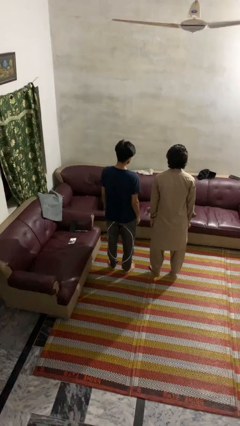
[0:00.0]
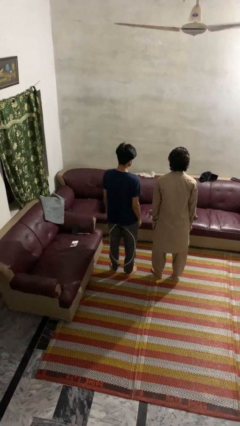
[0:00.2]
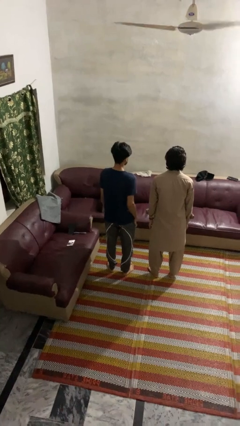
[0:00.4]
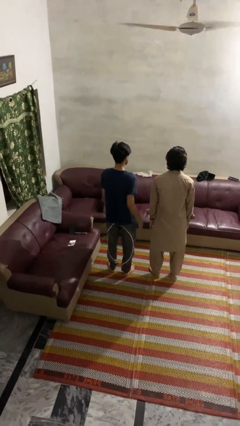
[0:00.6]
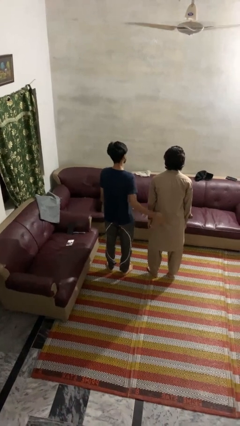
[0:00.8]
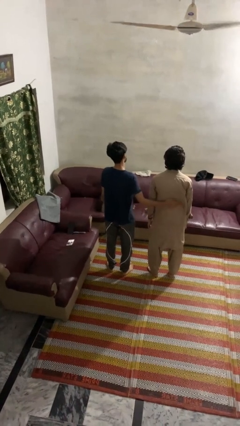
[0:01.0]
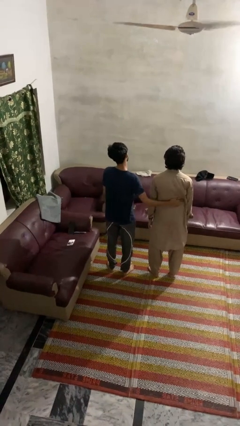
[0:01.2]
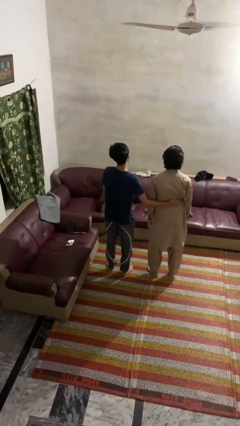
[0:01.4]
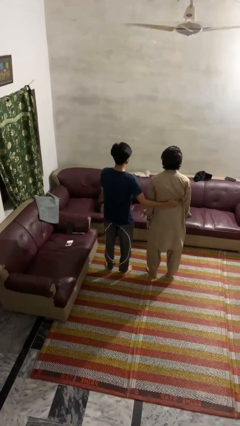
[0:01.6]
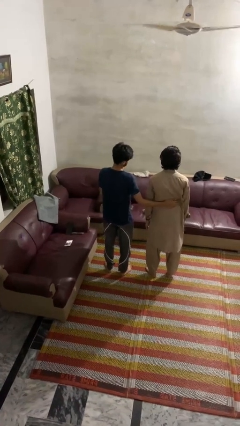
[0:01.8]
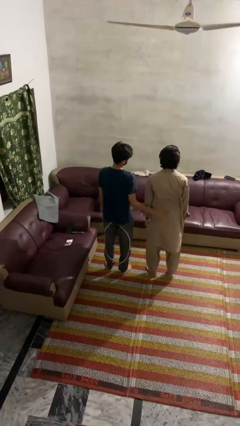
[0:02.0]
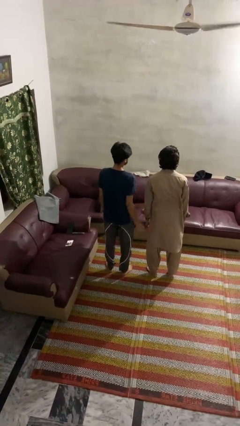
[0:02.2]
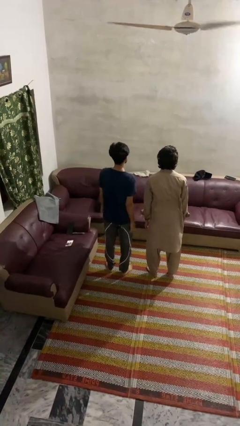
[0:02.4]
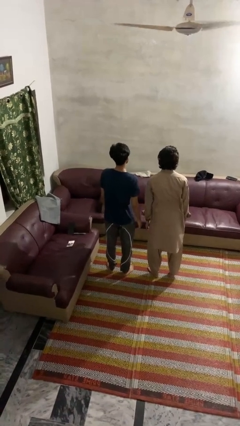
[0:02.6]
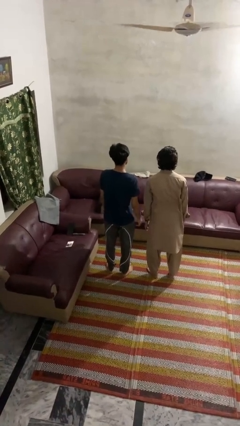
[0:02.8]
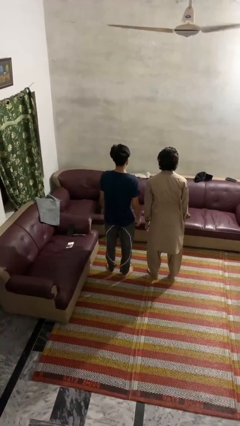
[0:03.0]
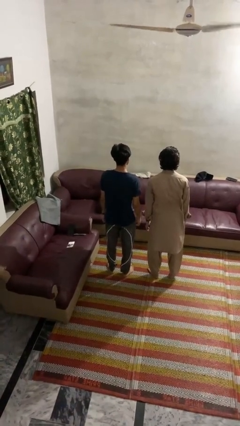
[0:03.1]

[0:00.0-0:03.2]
person touches back of person

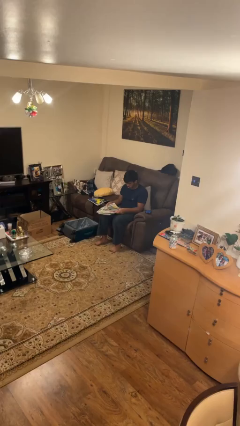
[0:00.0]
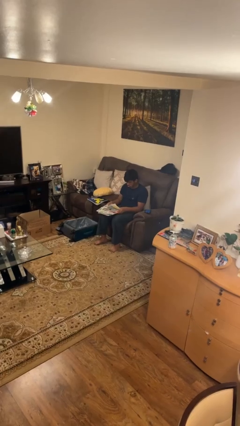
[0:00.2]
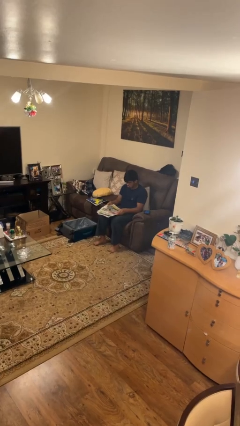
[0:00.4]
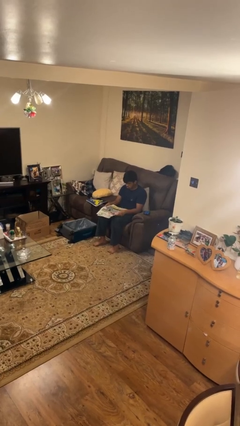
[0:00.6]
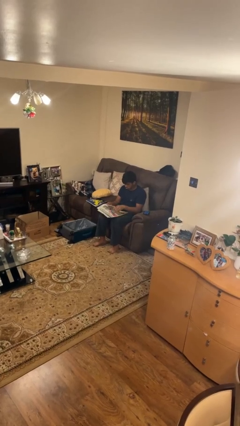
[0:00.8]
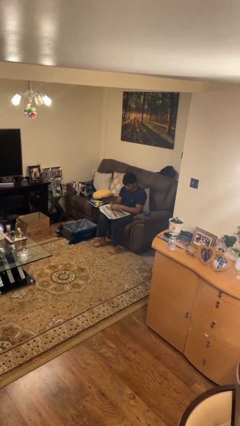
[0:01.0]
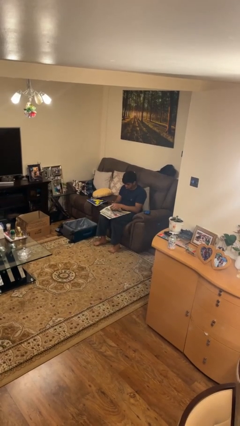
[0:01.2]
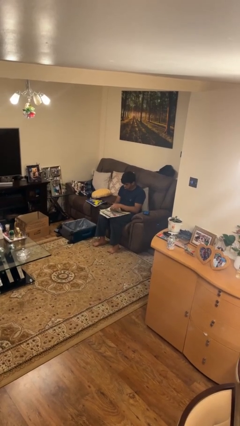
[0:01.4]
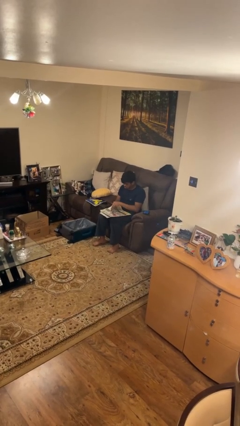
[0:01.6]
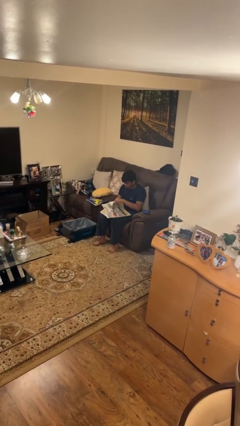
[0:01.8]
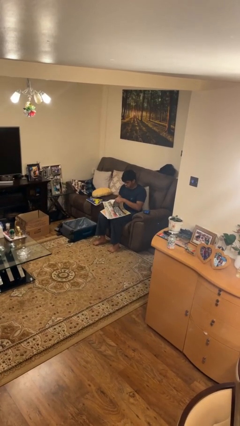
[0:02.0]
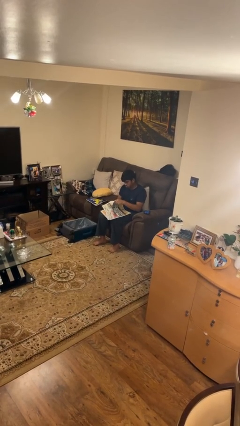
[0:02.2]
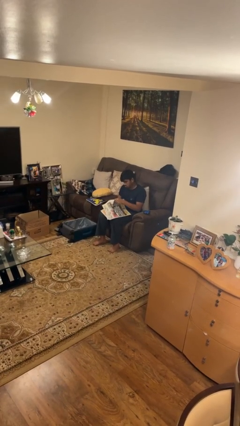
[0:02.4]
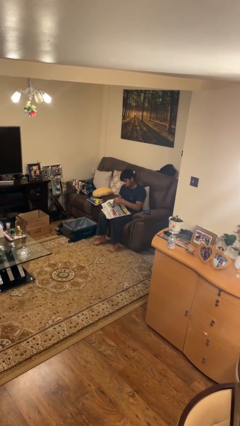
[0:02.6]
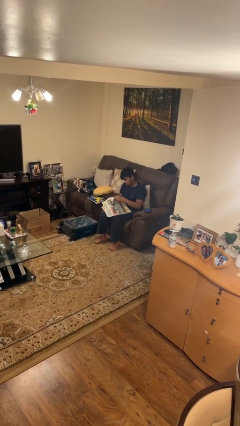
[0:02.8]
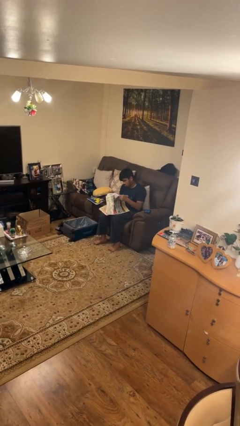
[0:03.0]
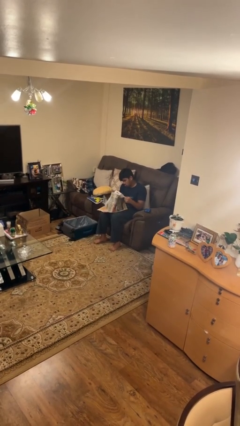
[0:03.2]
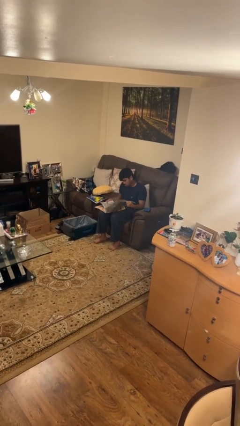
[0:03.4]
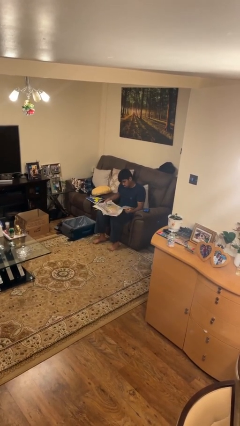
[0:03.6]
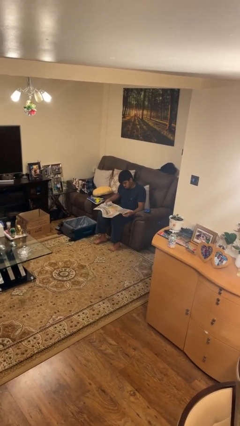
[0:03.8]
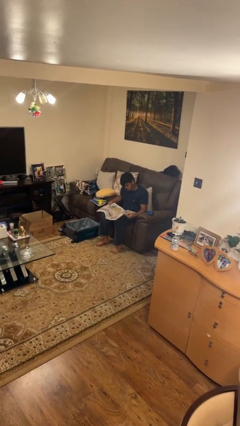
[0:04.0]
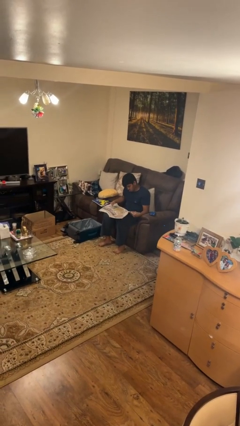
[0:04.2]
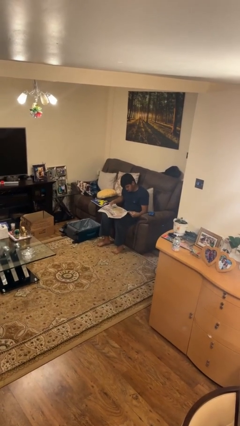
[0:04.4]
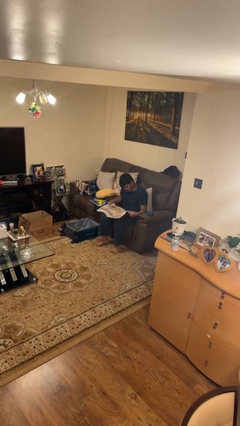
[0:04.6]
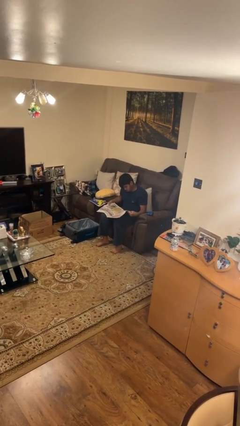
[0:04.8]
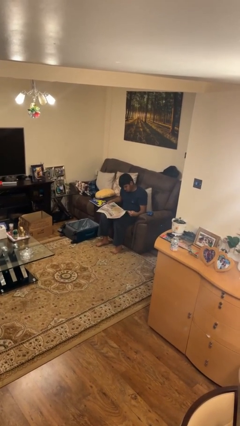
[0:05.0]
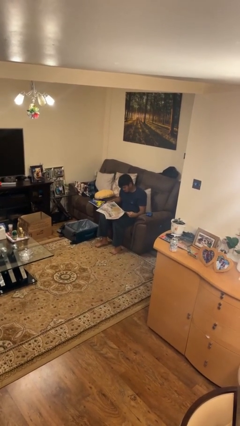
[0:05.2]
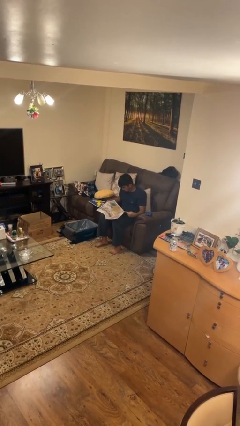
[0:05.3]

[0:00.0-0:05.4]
person reads newspaper

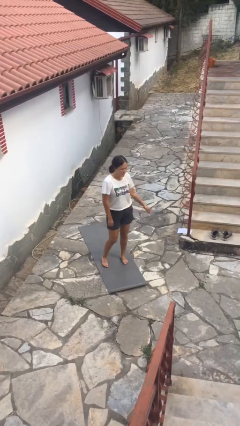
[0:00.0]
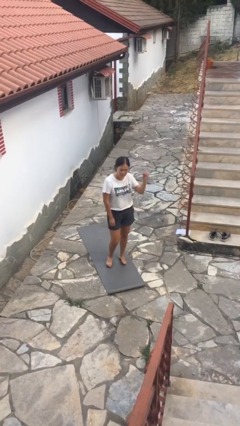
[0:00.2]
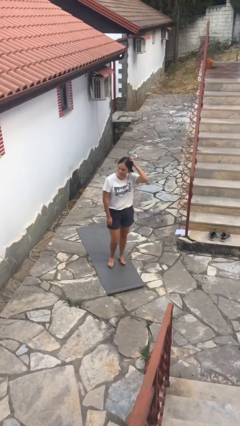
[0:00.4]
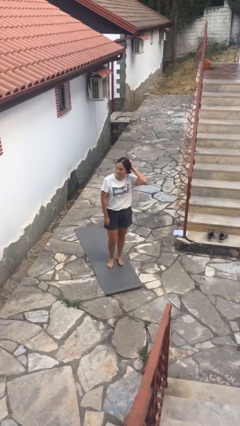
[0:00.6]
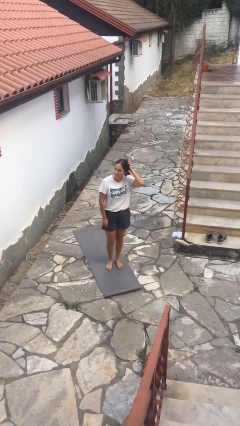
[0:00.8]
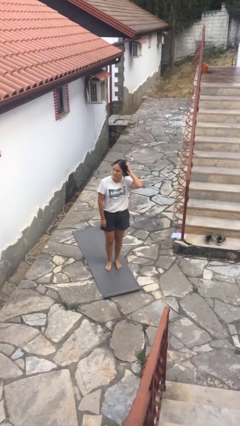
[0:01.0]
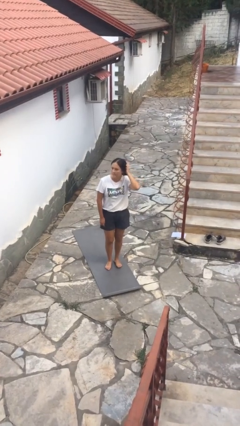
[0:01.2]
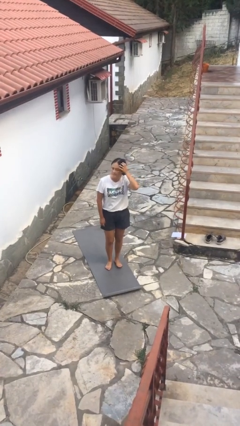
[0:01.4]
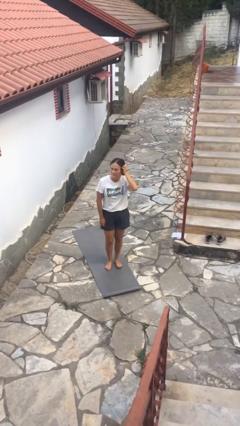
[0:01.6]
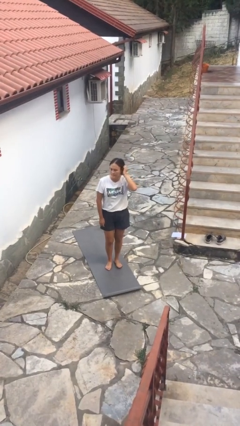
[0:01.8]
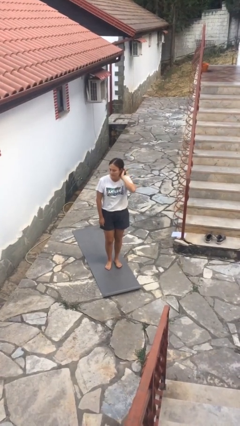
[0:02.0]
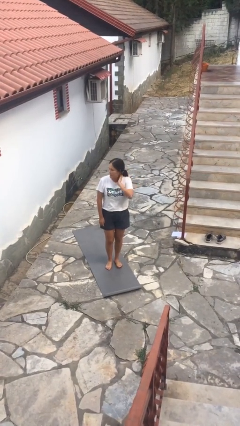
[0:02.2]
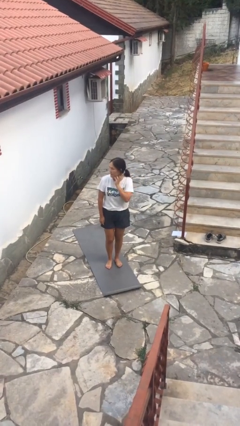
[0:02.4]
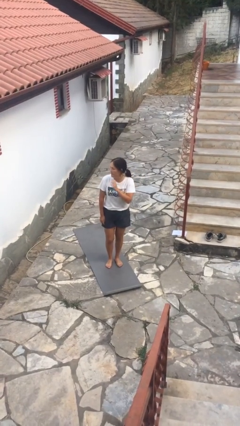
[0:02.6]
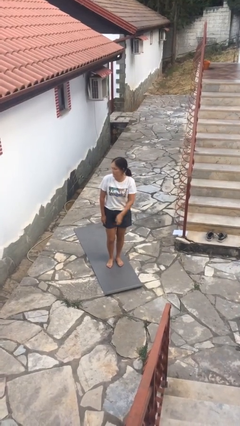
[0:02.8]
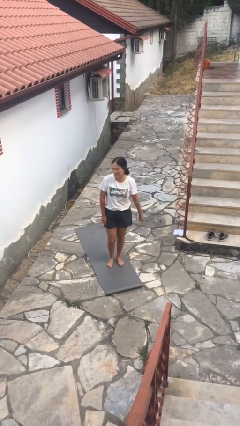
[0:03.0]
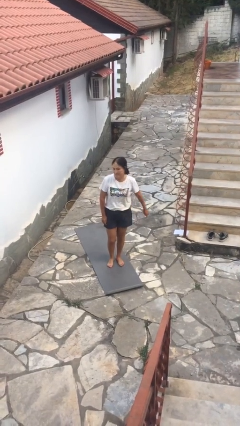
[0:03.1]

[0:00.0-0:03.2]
person scratches face

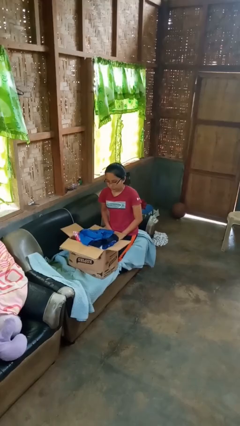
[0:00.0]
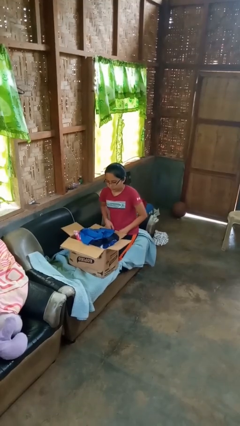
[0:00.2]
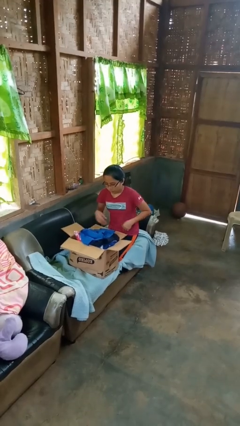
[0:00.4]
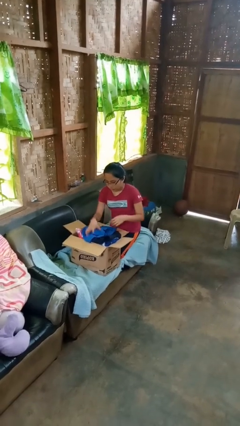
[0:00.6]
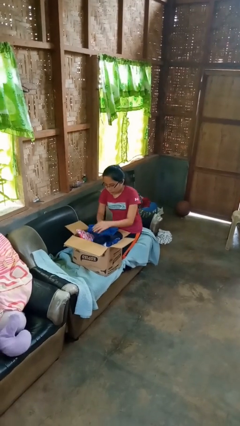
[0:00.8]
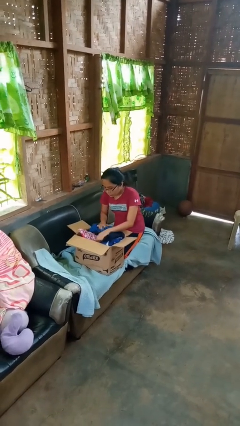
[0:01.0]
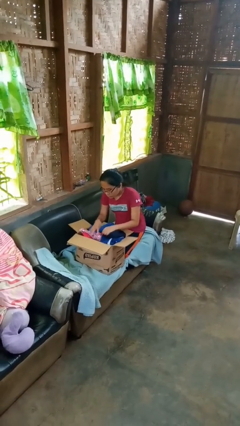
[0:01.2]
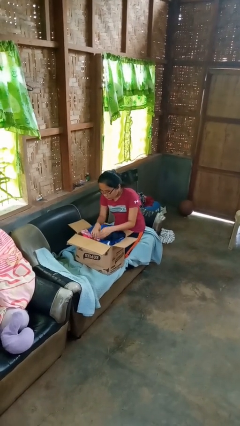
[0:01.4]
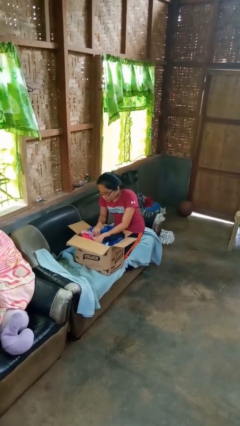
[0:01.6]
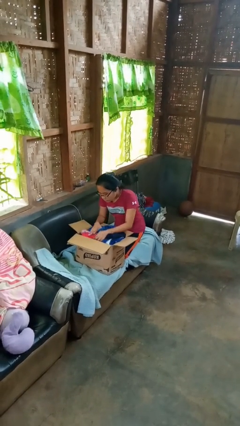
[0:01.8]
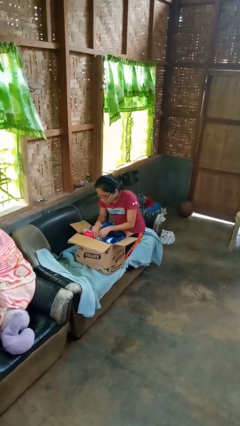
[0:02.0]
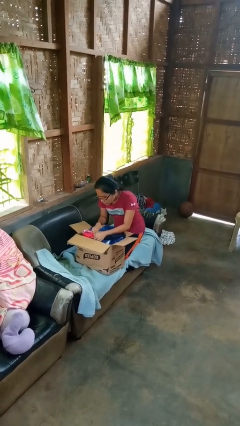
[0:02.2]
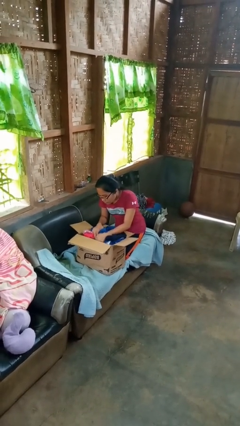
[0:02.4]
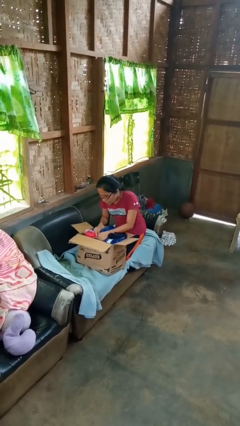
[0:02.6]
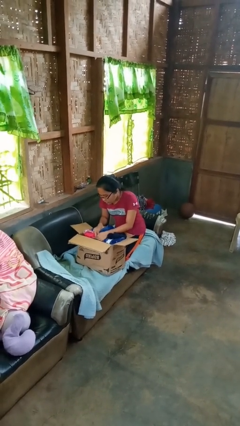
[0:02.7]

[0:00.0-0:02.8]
person searches in box

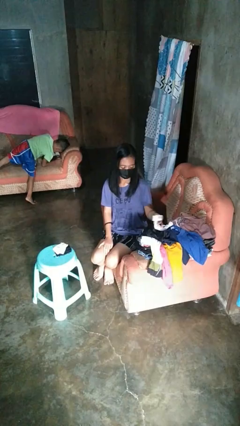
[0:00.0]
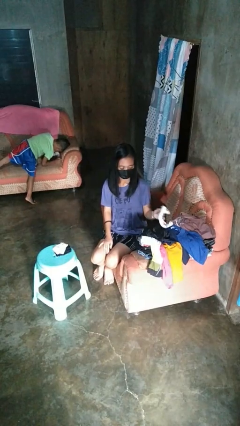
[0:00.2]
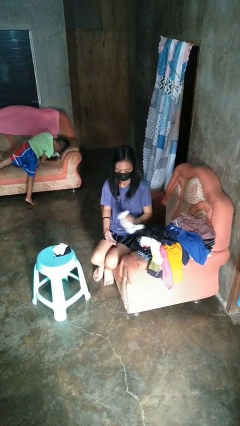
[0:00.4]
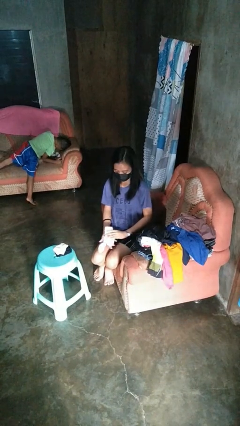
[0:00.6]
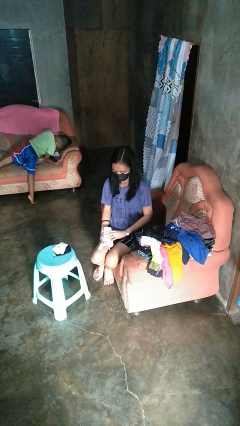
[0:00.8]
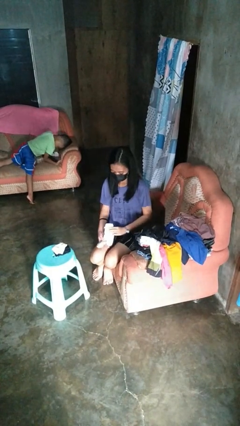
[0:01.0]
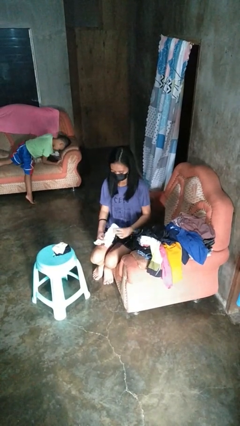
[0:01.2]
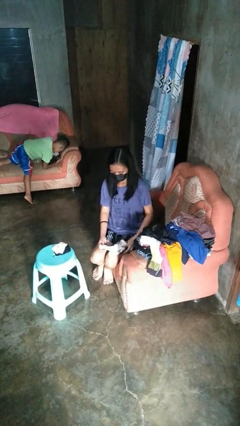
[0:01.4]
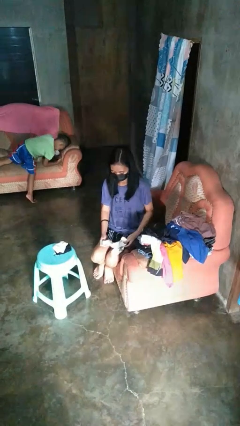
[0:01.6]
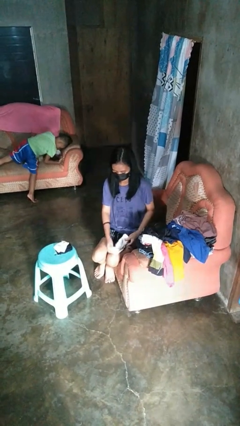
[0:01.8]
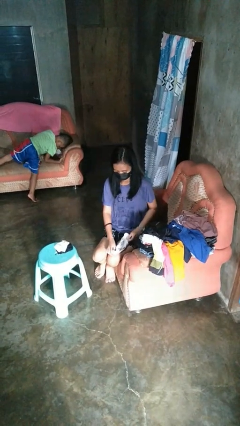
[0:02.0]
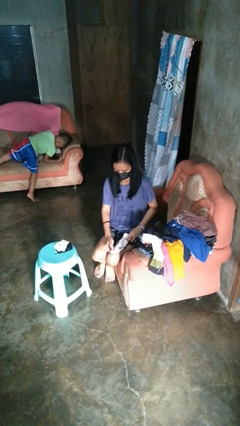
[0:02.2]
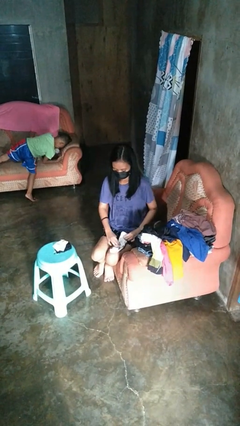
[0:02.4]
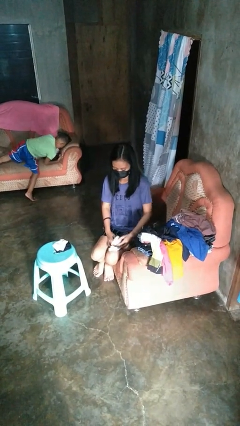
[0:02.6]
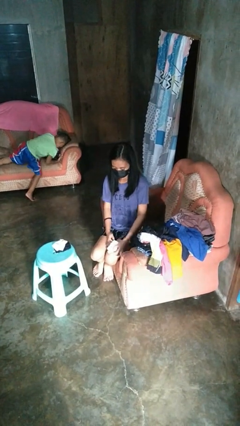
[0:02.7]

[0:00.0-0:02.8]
person folds socks

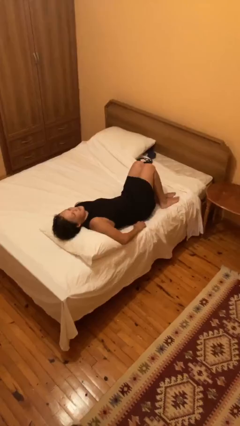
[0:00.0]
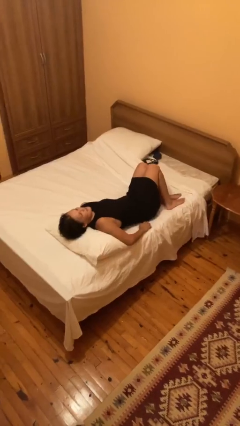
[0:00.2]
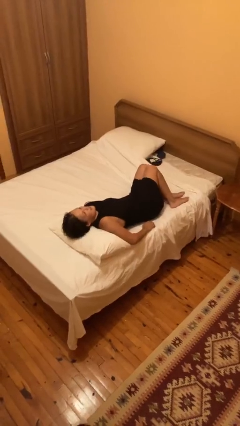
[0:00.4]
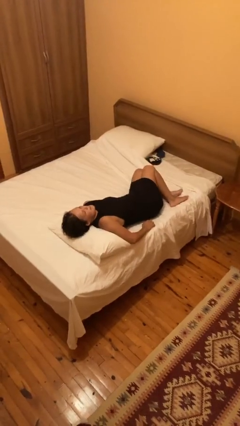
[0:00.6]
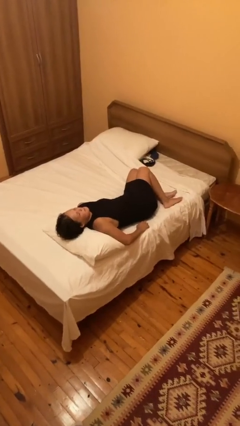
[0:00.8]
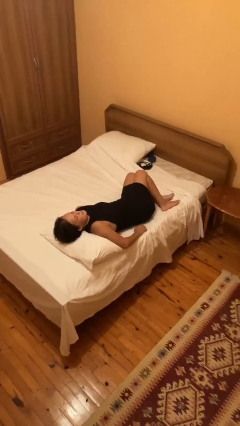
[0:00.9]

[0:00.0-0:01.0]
person lies down on bed
